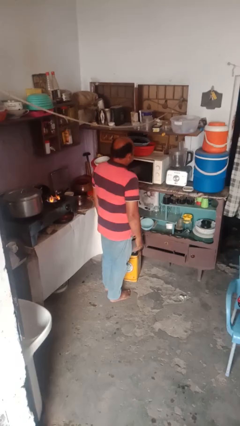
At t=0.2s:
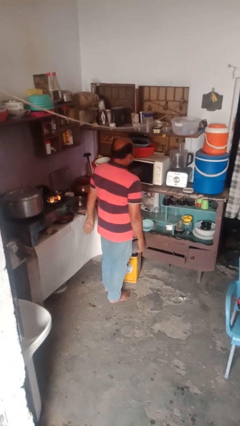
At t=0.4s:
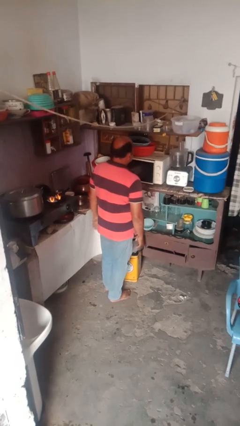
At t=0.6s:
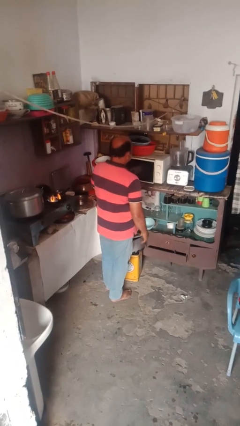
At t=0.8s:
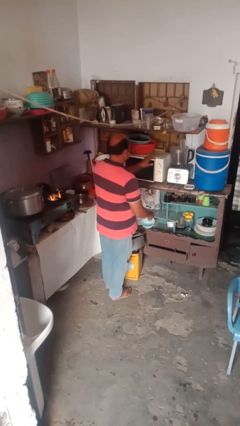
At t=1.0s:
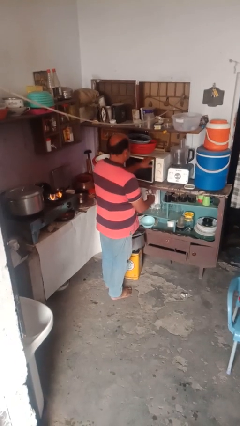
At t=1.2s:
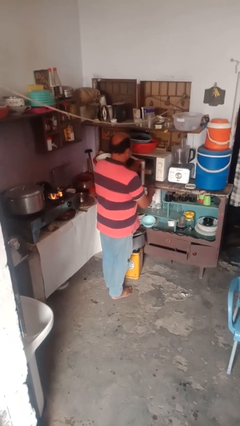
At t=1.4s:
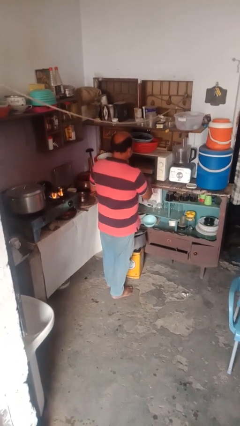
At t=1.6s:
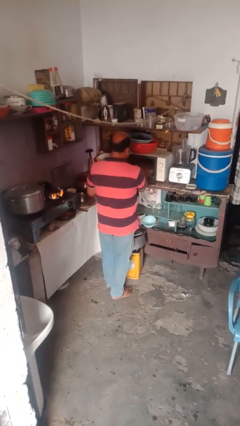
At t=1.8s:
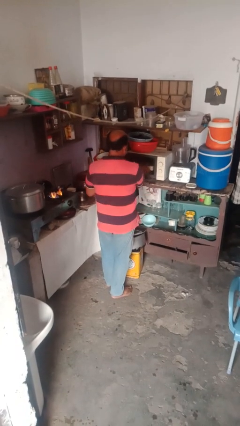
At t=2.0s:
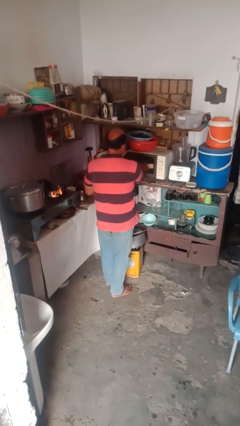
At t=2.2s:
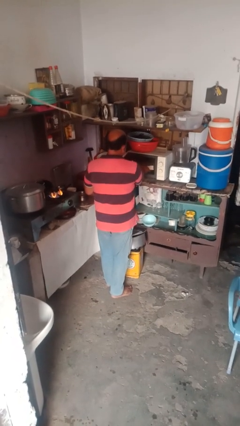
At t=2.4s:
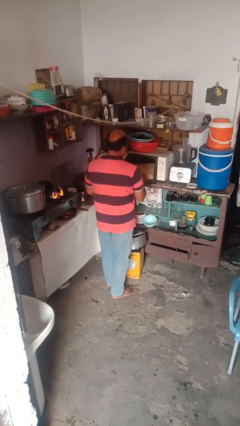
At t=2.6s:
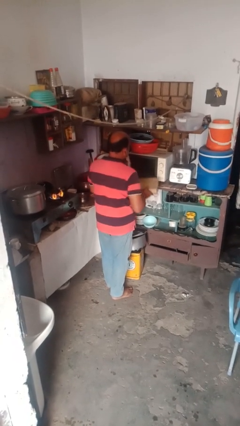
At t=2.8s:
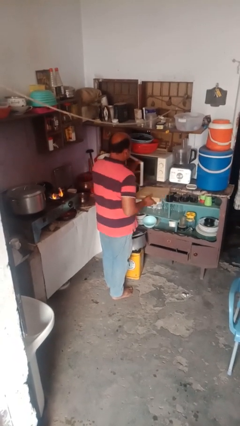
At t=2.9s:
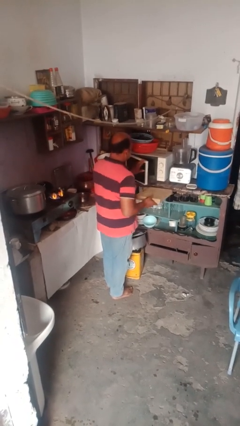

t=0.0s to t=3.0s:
person takes object from microwave

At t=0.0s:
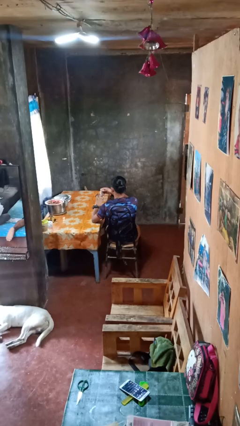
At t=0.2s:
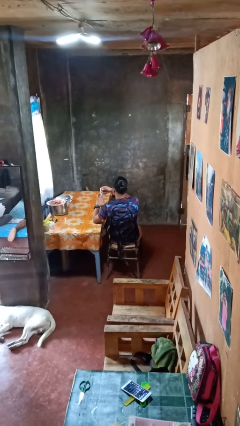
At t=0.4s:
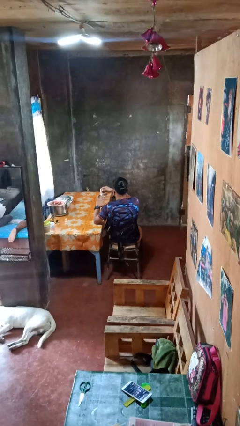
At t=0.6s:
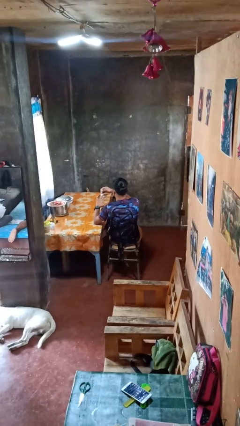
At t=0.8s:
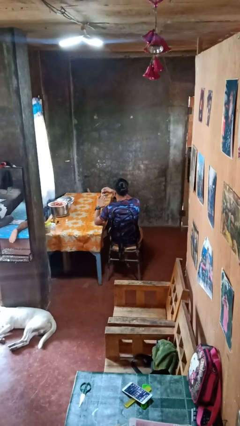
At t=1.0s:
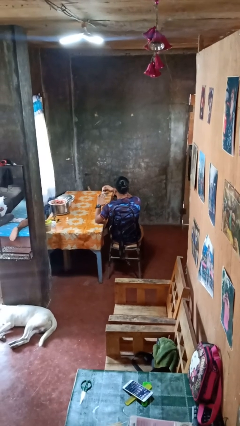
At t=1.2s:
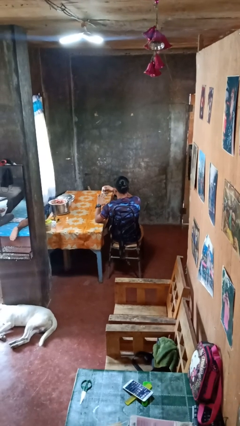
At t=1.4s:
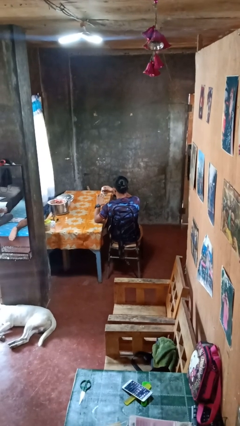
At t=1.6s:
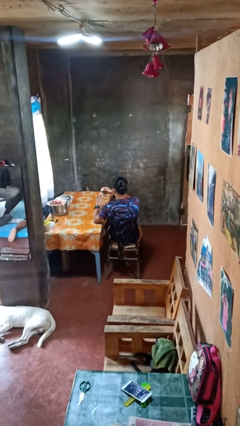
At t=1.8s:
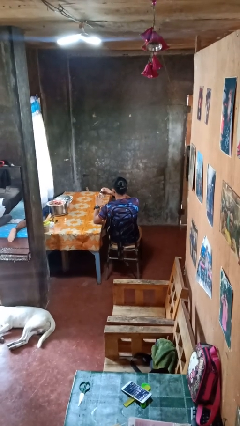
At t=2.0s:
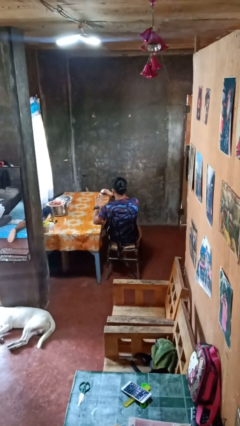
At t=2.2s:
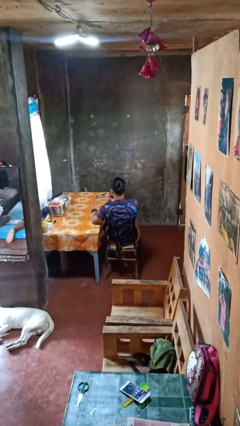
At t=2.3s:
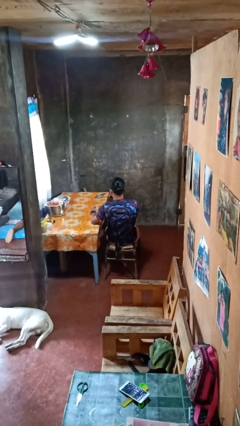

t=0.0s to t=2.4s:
person clips fingernails

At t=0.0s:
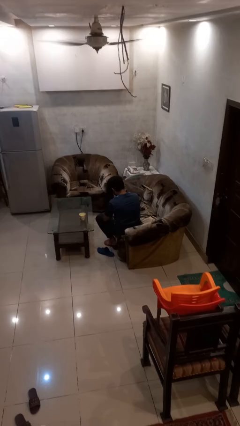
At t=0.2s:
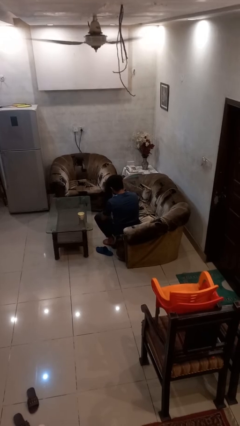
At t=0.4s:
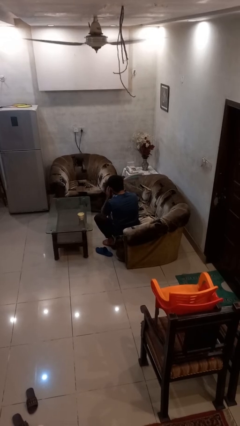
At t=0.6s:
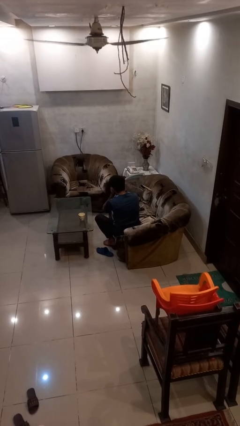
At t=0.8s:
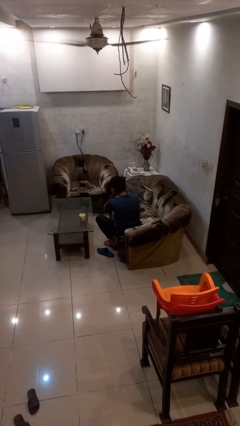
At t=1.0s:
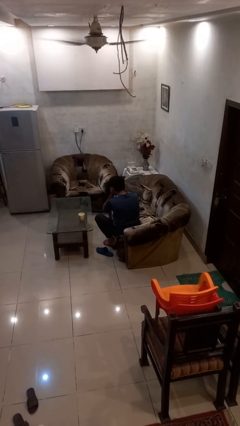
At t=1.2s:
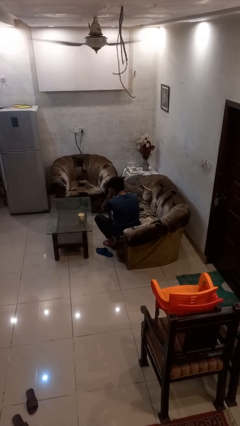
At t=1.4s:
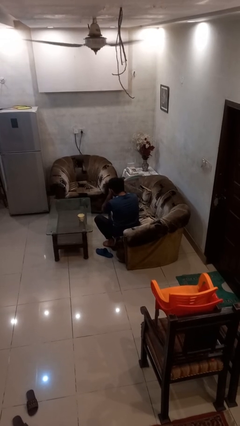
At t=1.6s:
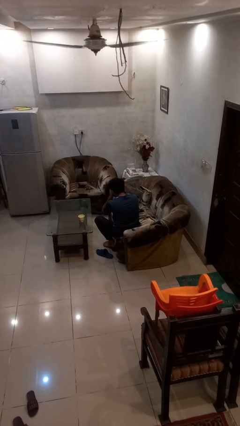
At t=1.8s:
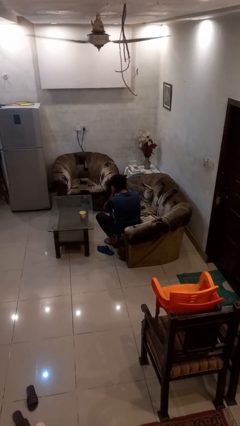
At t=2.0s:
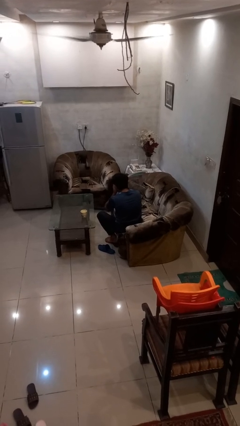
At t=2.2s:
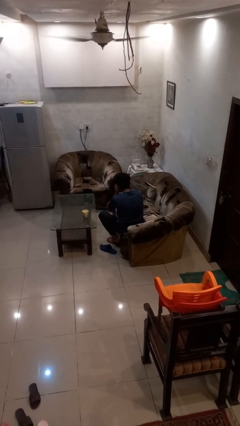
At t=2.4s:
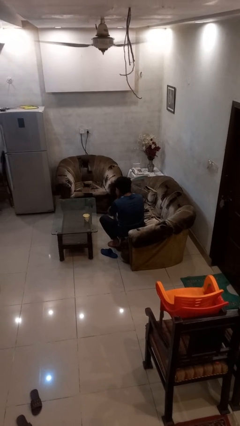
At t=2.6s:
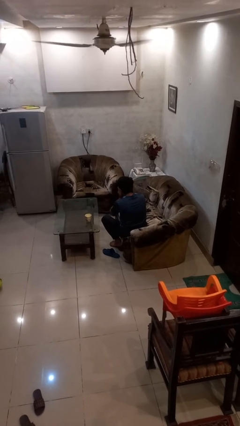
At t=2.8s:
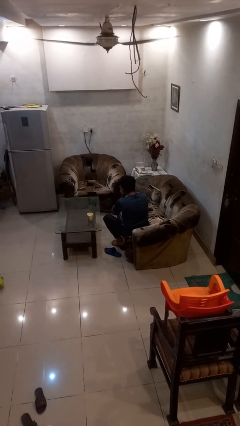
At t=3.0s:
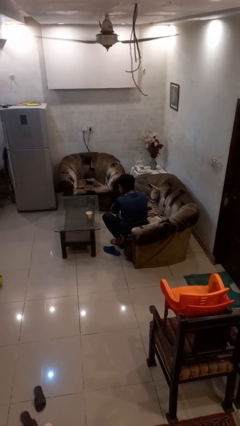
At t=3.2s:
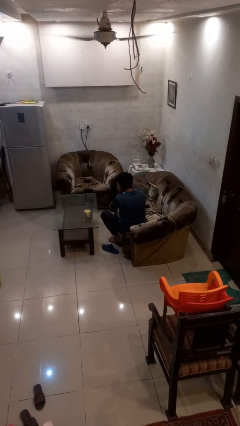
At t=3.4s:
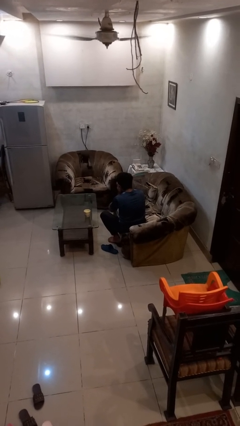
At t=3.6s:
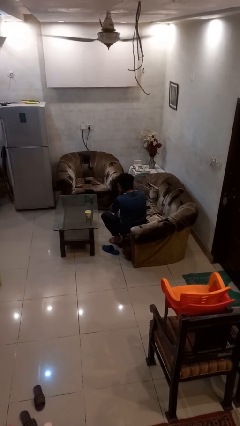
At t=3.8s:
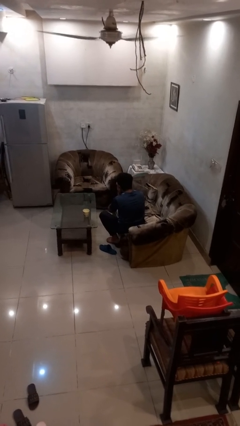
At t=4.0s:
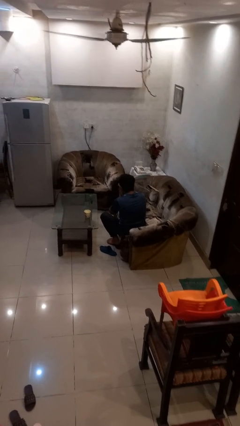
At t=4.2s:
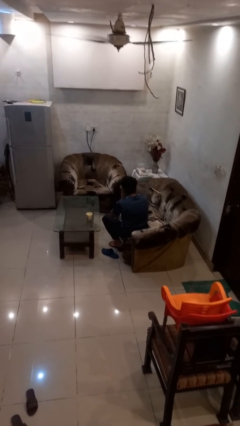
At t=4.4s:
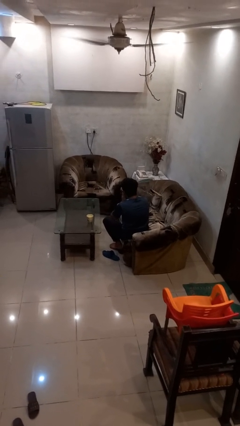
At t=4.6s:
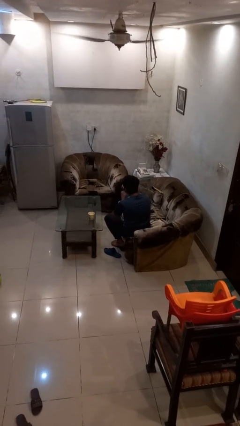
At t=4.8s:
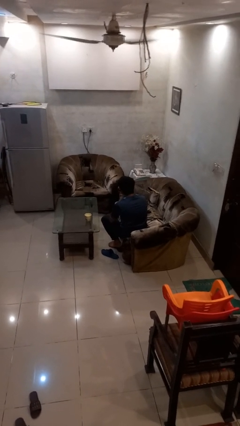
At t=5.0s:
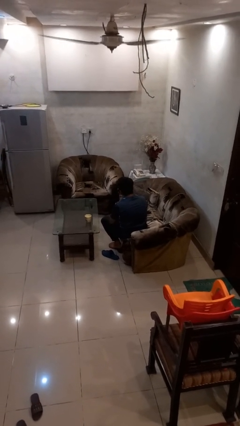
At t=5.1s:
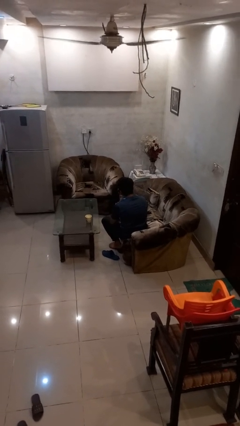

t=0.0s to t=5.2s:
person covers face with hands

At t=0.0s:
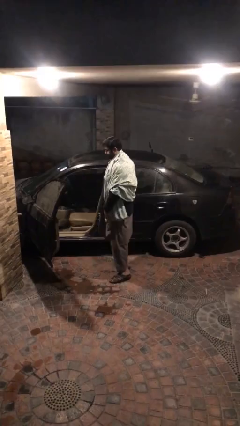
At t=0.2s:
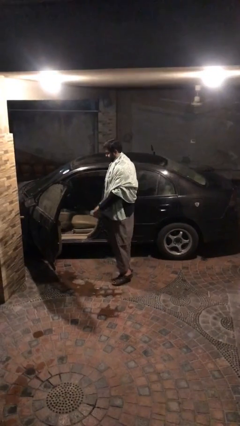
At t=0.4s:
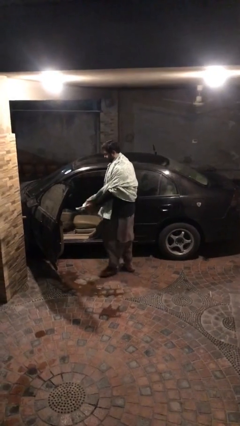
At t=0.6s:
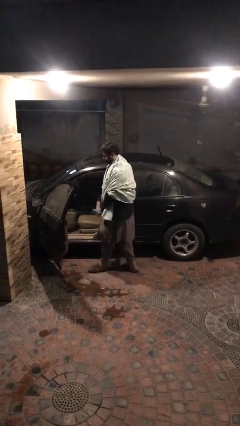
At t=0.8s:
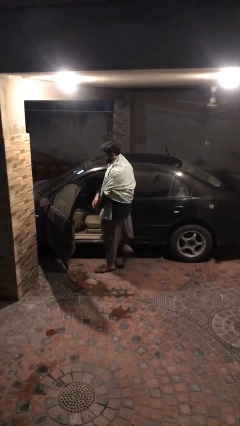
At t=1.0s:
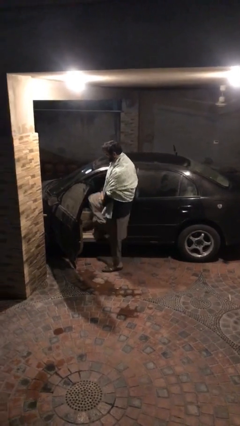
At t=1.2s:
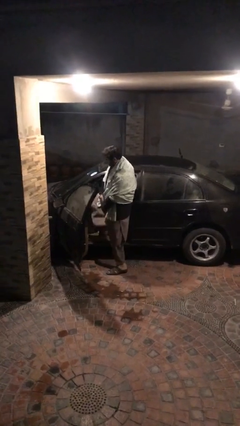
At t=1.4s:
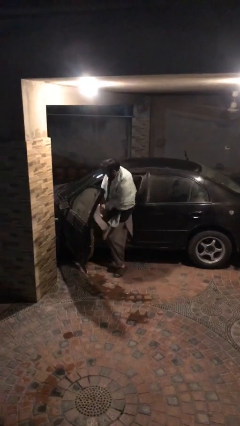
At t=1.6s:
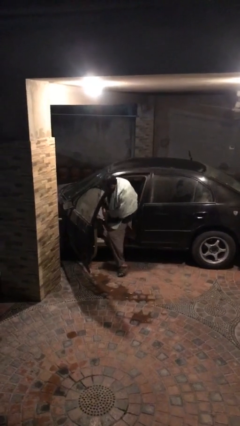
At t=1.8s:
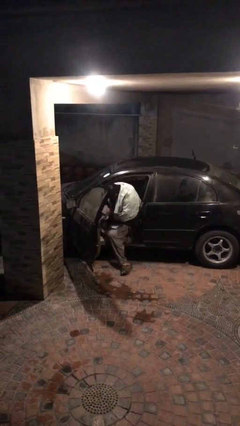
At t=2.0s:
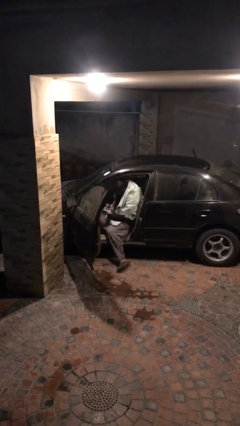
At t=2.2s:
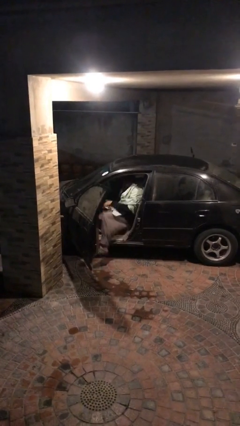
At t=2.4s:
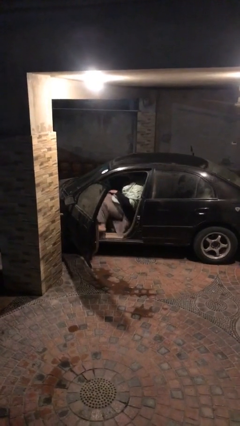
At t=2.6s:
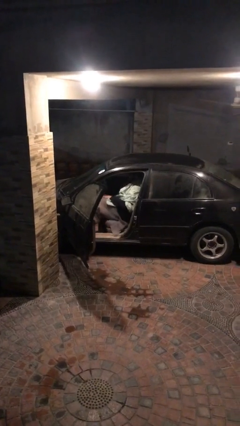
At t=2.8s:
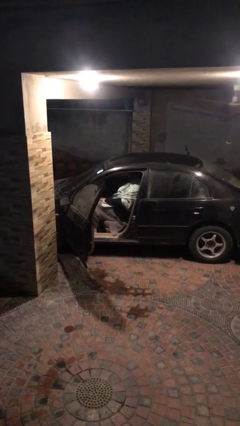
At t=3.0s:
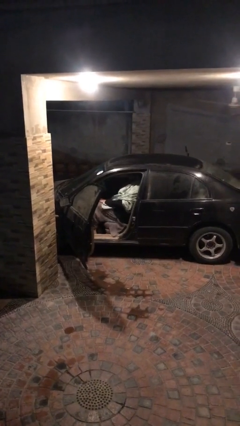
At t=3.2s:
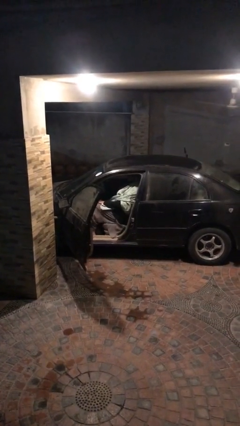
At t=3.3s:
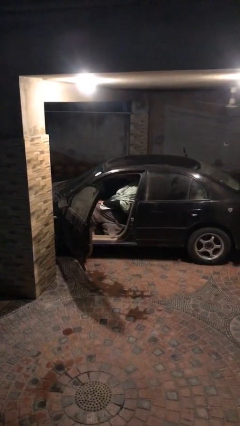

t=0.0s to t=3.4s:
person enters car

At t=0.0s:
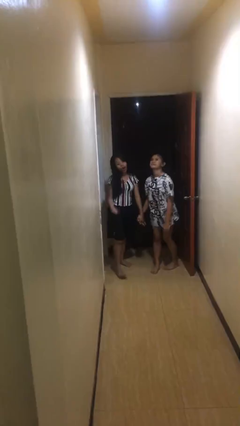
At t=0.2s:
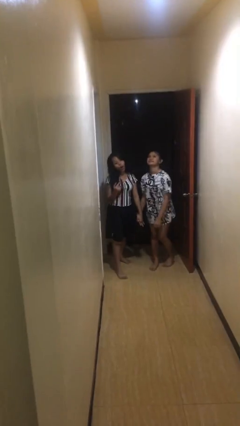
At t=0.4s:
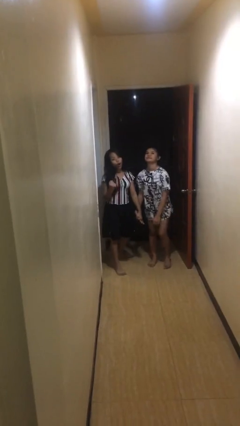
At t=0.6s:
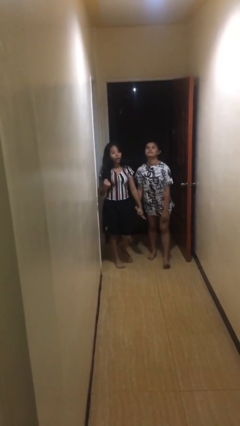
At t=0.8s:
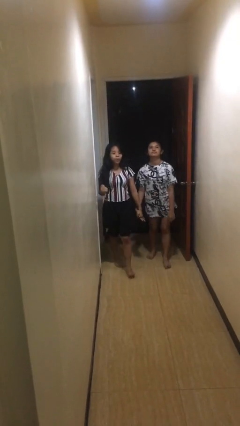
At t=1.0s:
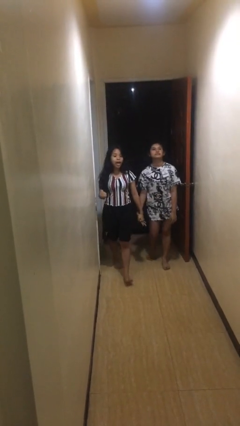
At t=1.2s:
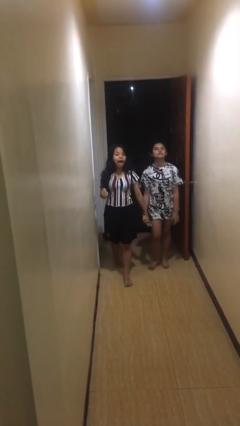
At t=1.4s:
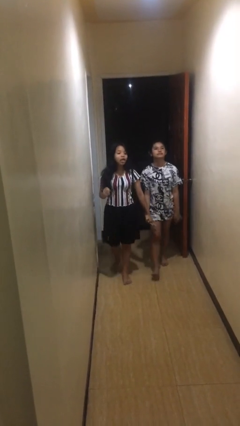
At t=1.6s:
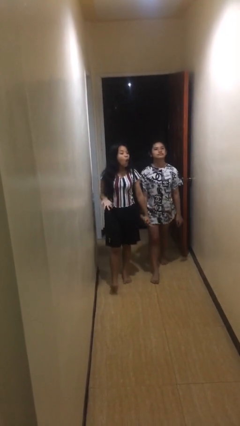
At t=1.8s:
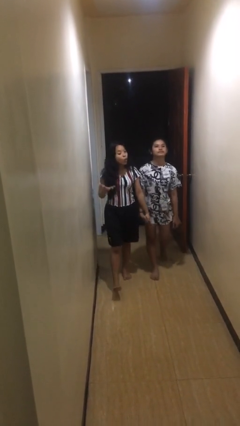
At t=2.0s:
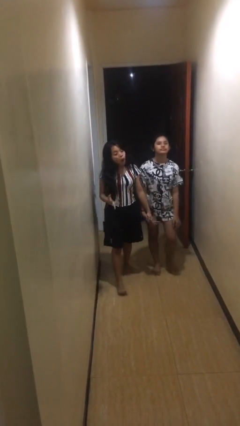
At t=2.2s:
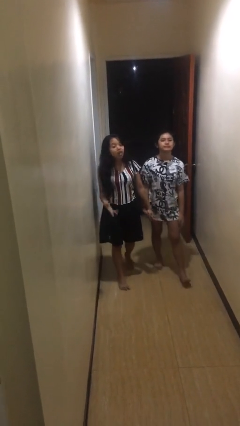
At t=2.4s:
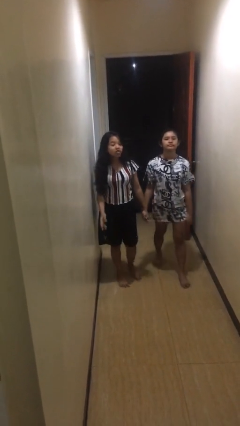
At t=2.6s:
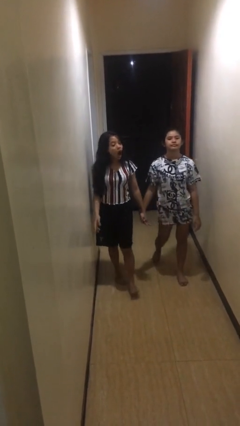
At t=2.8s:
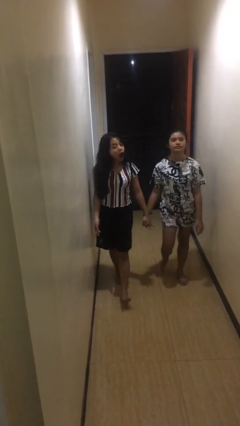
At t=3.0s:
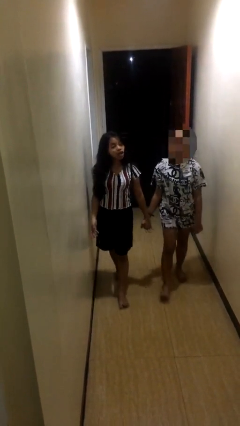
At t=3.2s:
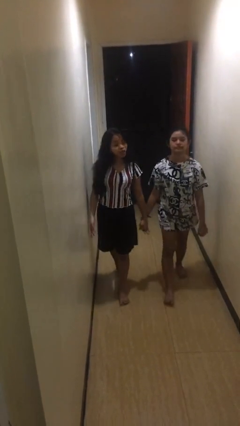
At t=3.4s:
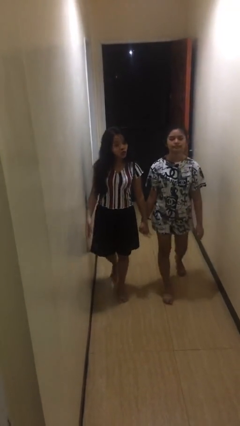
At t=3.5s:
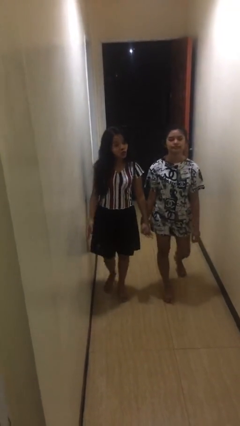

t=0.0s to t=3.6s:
person holds hand
